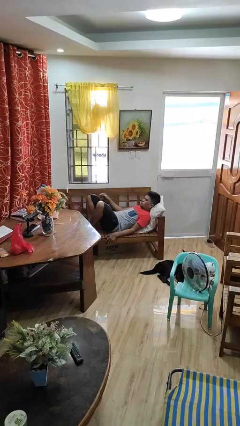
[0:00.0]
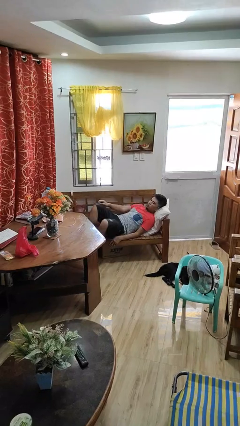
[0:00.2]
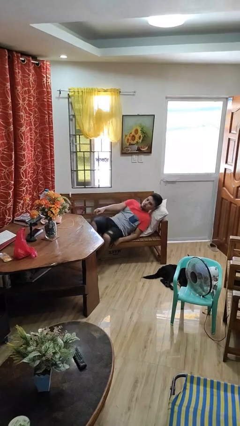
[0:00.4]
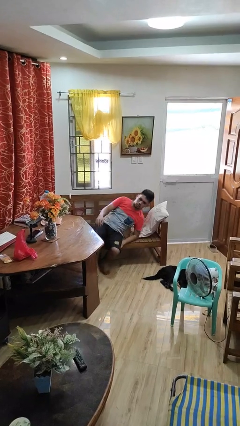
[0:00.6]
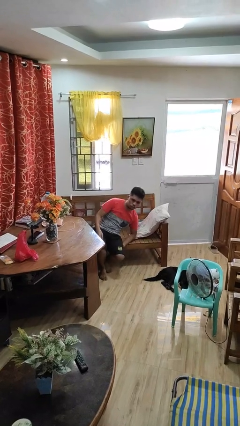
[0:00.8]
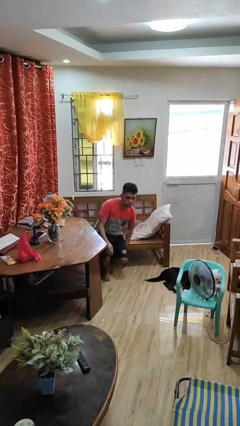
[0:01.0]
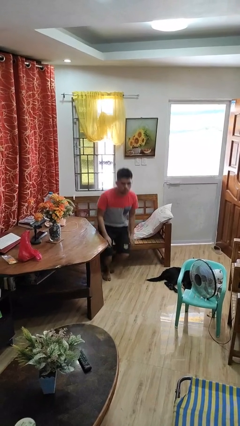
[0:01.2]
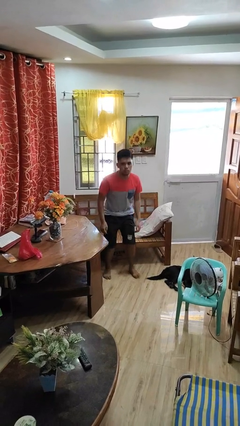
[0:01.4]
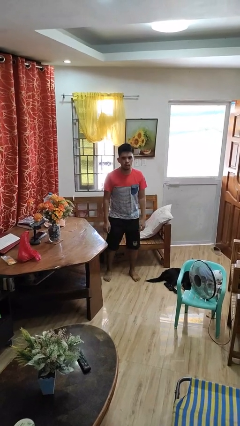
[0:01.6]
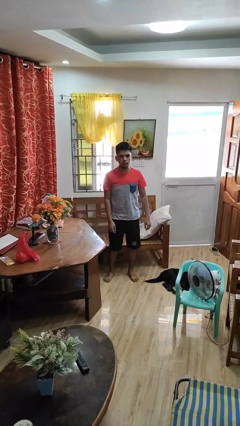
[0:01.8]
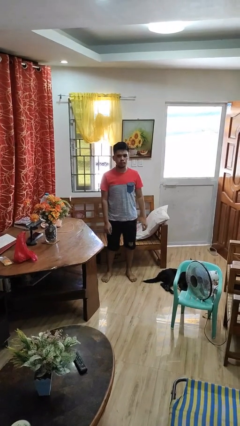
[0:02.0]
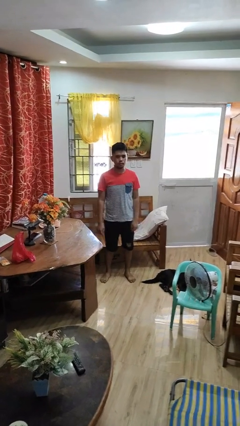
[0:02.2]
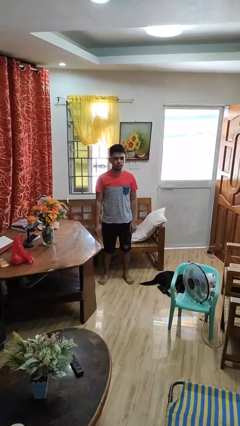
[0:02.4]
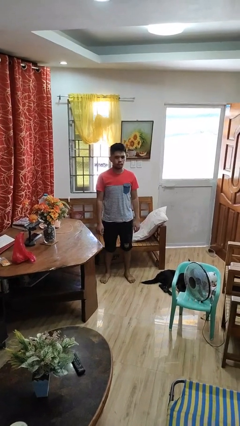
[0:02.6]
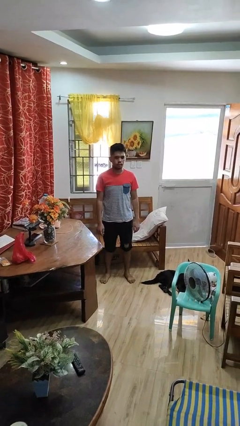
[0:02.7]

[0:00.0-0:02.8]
person stands up

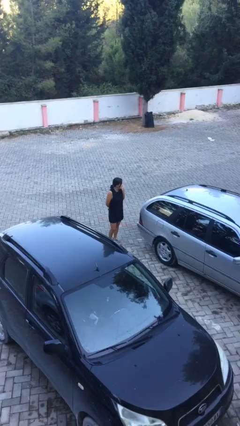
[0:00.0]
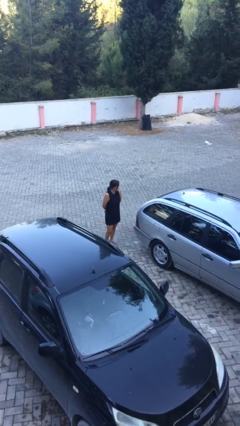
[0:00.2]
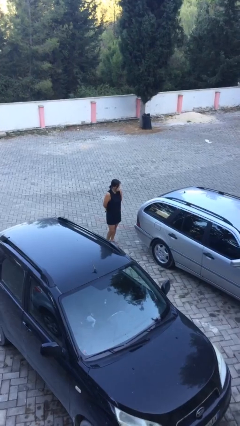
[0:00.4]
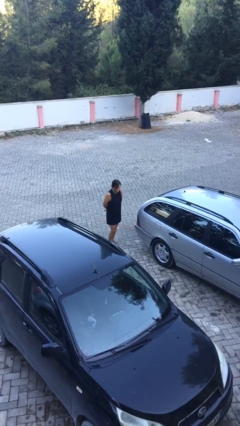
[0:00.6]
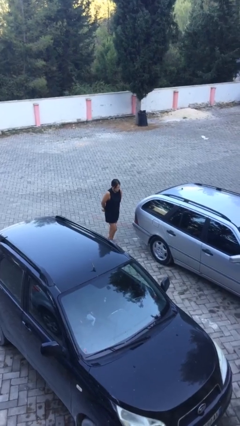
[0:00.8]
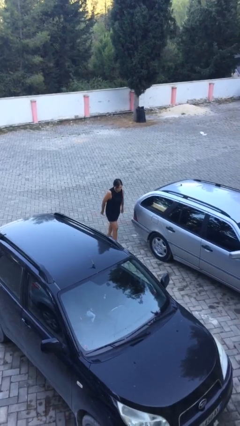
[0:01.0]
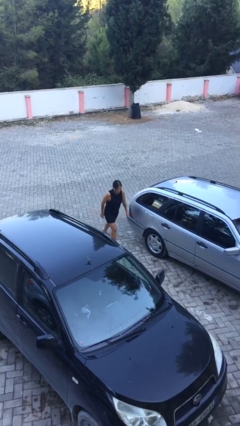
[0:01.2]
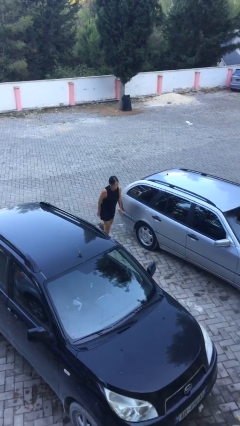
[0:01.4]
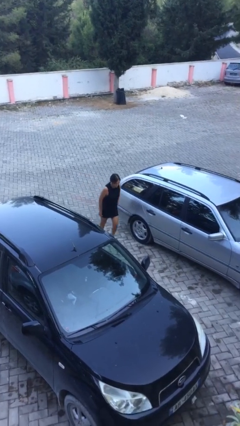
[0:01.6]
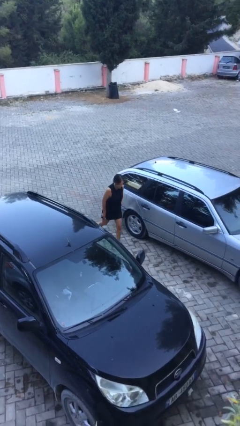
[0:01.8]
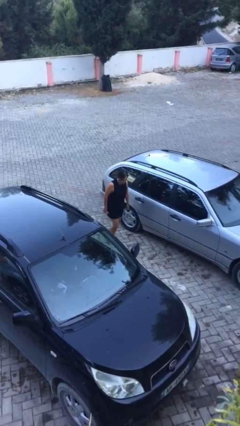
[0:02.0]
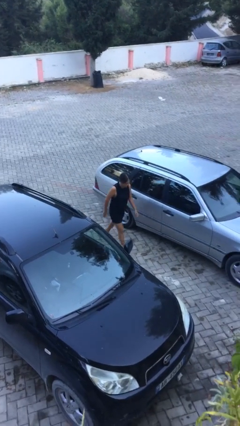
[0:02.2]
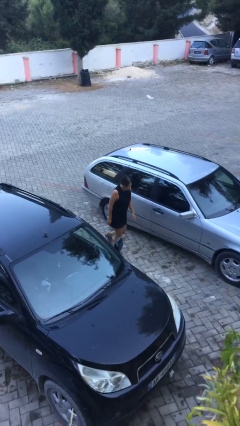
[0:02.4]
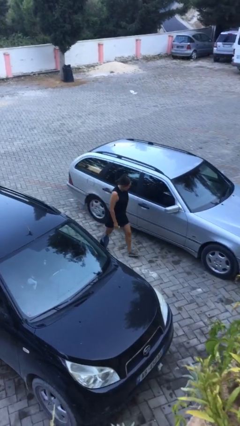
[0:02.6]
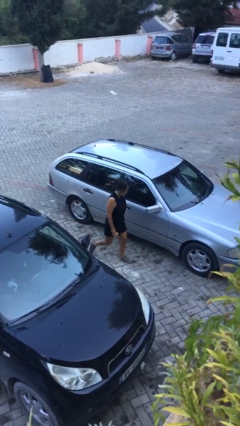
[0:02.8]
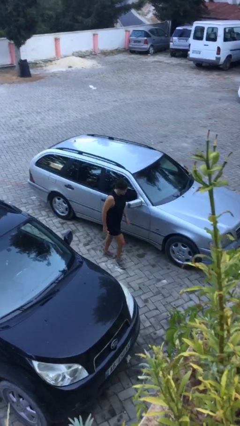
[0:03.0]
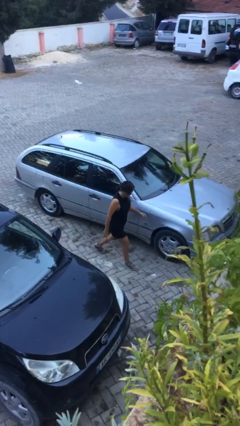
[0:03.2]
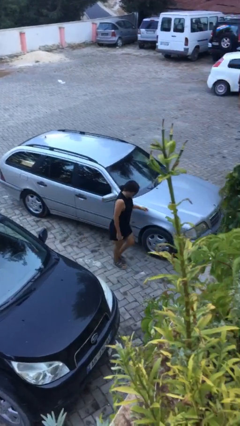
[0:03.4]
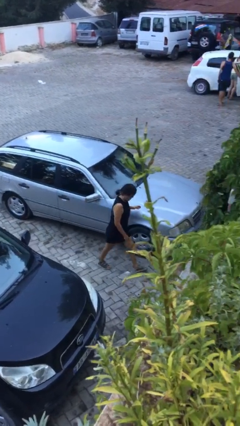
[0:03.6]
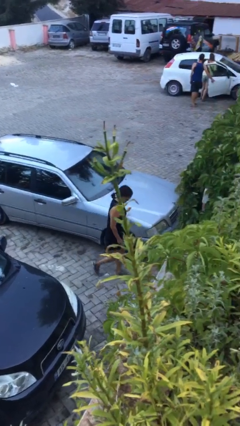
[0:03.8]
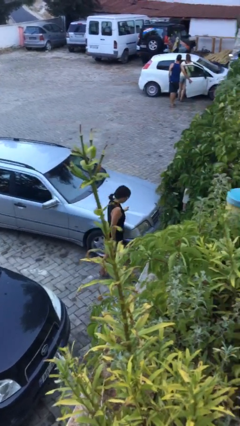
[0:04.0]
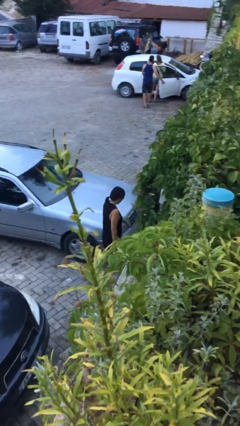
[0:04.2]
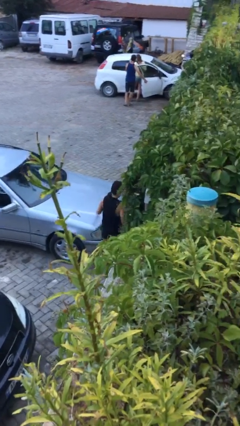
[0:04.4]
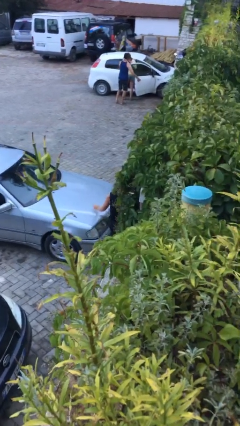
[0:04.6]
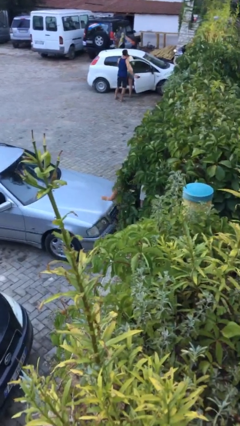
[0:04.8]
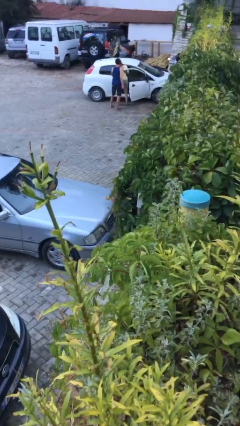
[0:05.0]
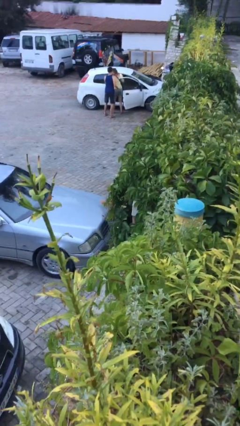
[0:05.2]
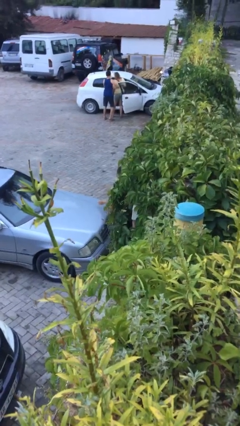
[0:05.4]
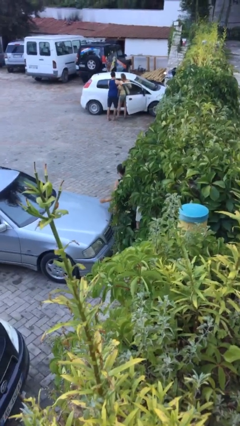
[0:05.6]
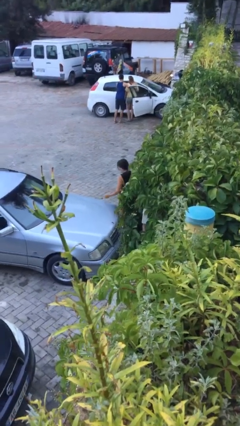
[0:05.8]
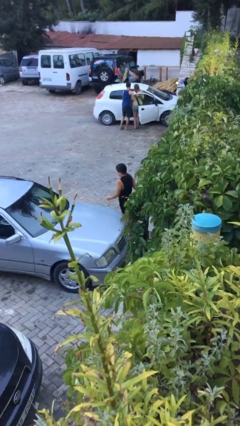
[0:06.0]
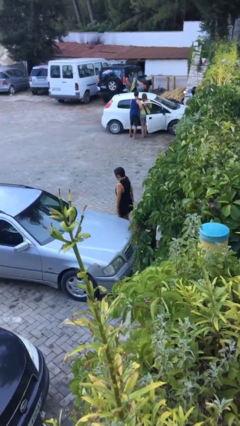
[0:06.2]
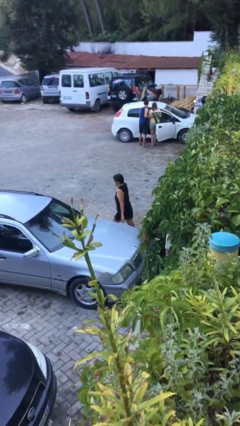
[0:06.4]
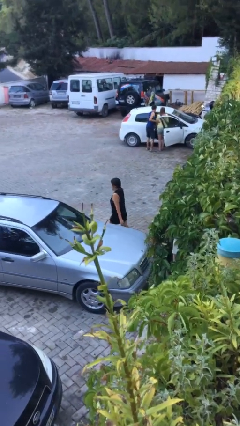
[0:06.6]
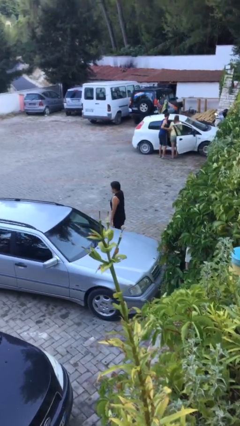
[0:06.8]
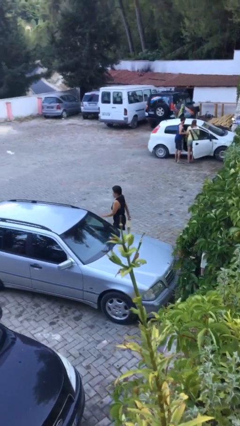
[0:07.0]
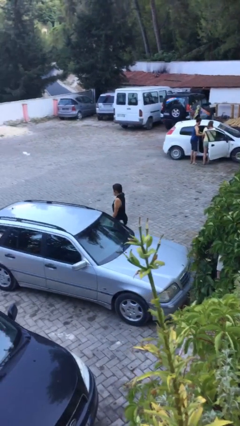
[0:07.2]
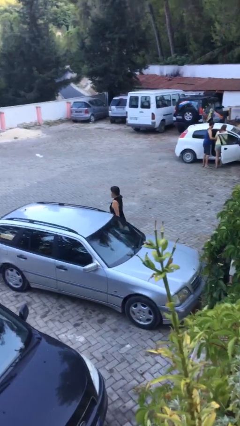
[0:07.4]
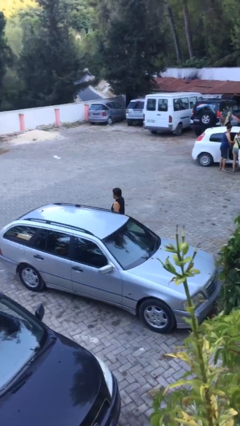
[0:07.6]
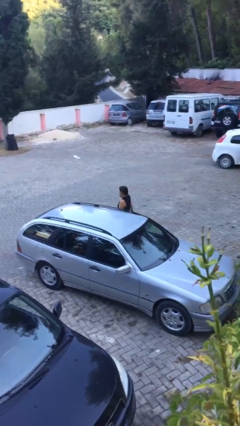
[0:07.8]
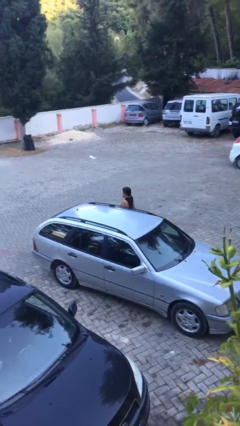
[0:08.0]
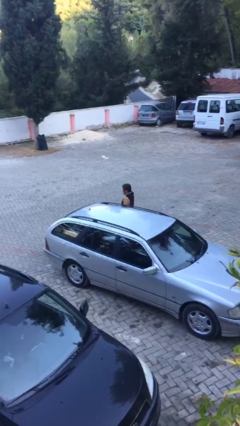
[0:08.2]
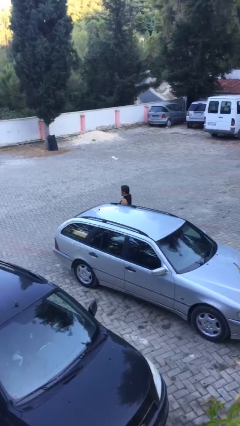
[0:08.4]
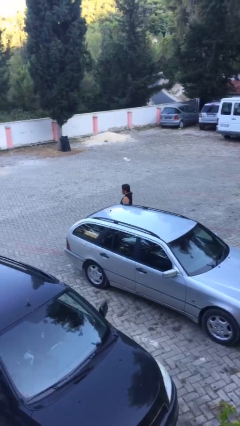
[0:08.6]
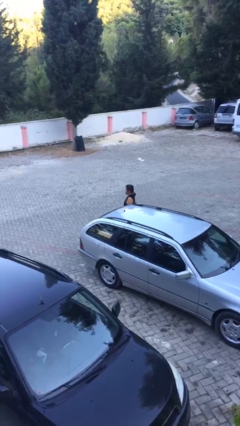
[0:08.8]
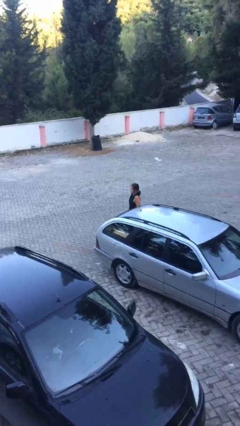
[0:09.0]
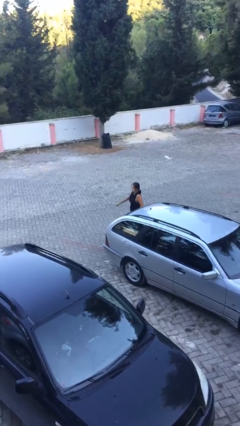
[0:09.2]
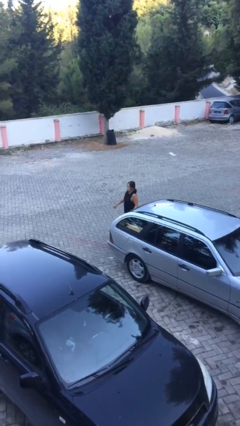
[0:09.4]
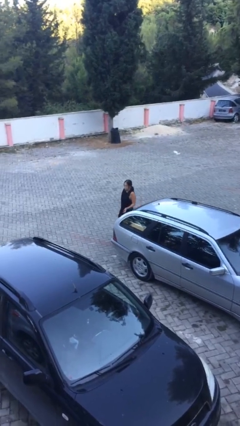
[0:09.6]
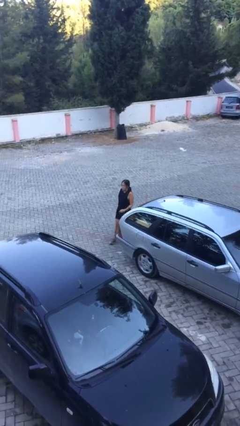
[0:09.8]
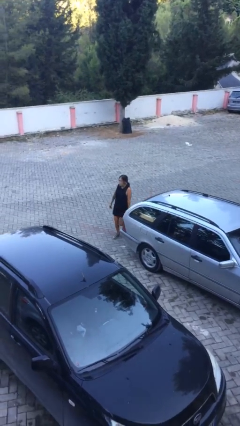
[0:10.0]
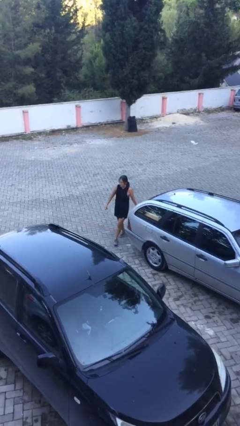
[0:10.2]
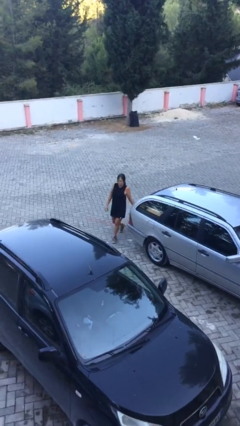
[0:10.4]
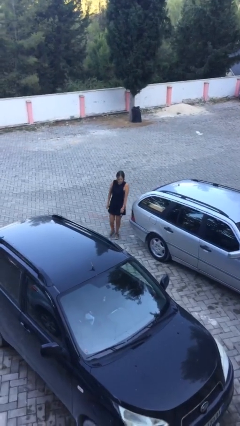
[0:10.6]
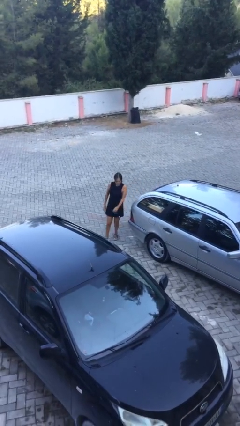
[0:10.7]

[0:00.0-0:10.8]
person walks around car

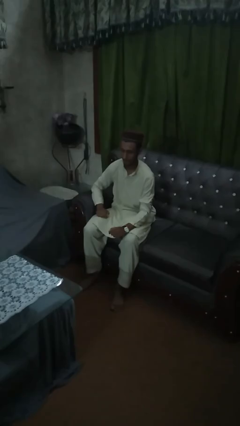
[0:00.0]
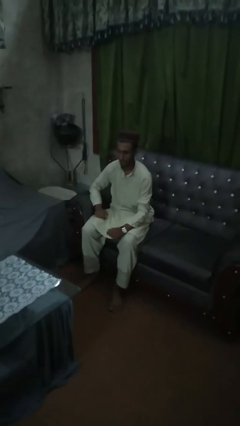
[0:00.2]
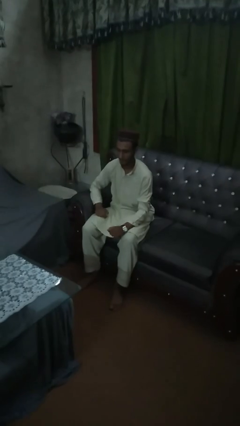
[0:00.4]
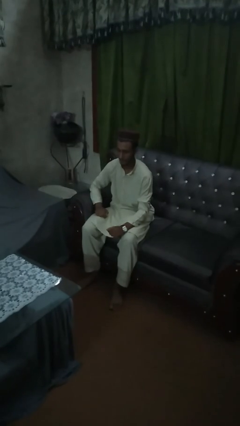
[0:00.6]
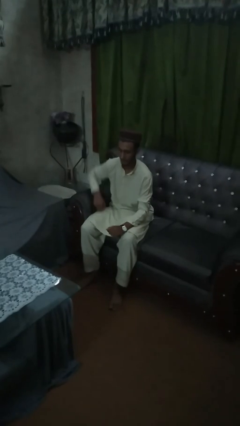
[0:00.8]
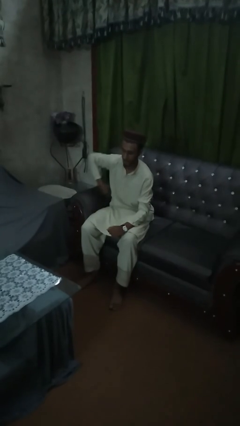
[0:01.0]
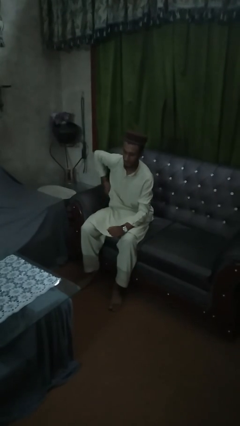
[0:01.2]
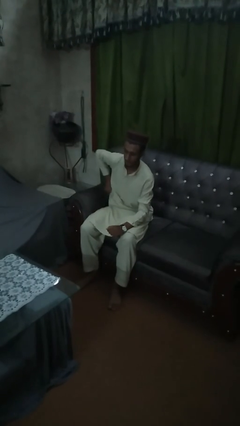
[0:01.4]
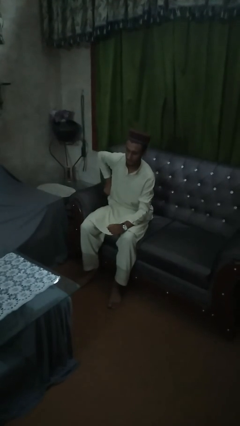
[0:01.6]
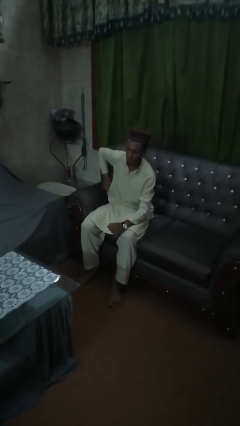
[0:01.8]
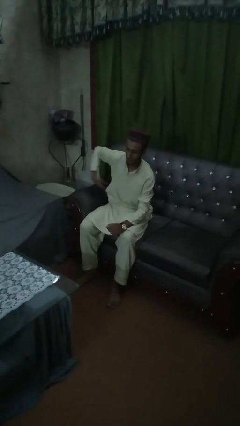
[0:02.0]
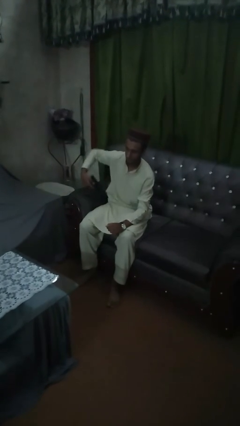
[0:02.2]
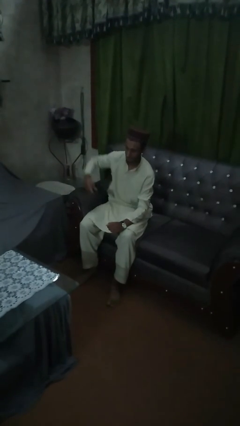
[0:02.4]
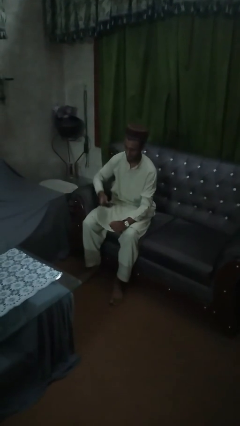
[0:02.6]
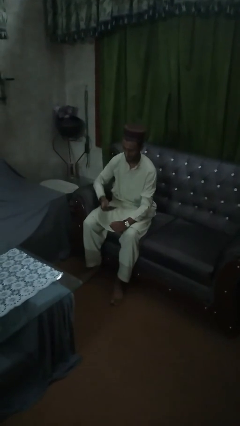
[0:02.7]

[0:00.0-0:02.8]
person takes phone from pocket

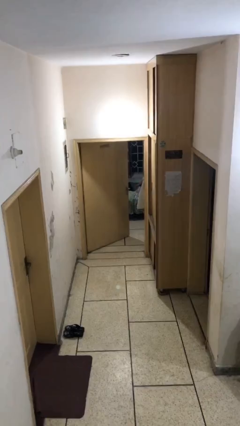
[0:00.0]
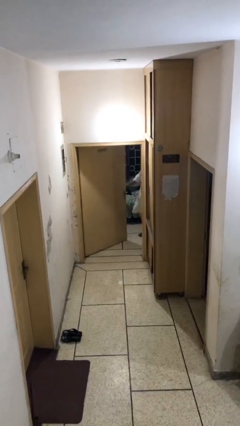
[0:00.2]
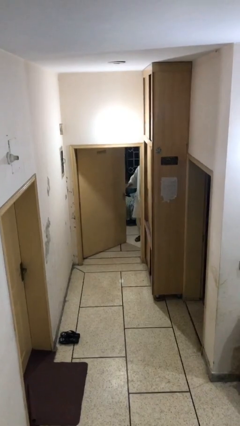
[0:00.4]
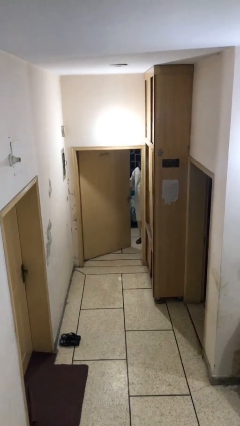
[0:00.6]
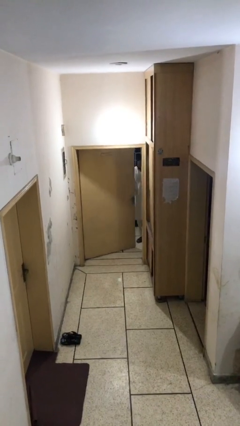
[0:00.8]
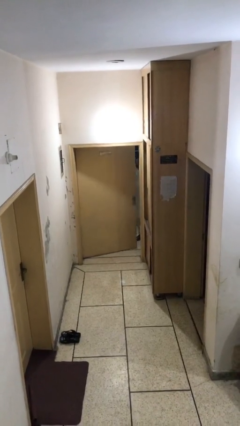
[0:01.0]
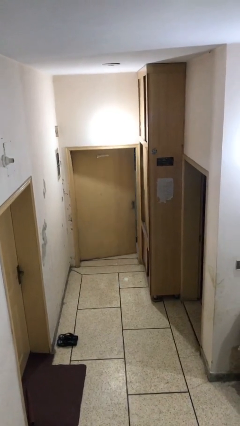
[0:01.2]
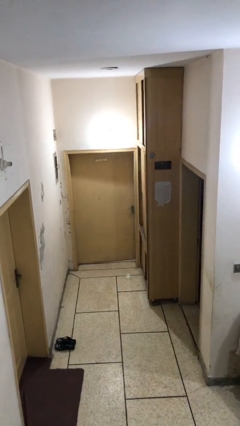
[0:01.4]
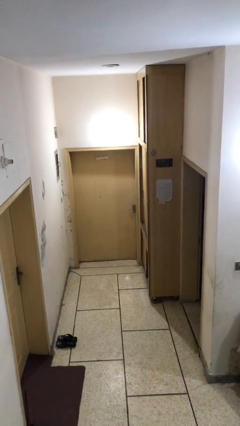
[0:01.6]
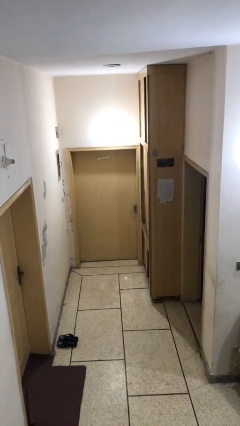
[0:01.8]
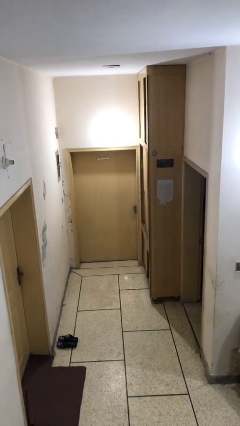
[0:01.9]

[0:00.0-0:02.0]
person closes facility door
